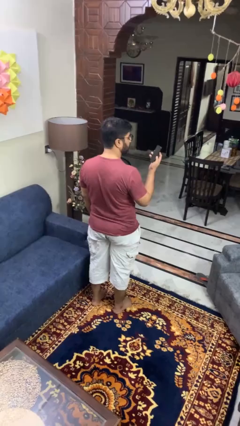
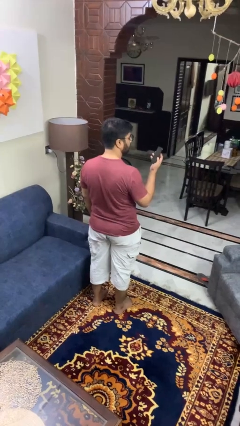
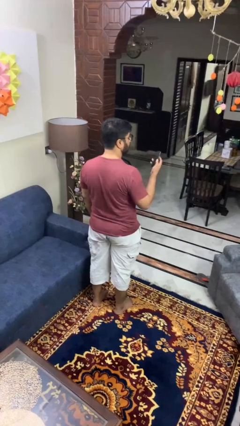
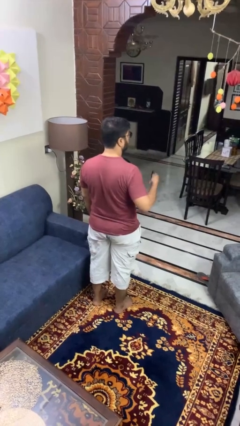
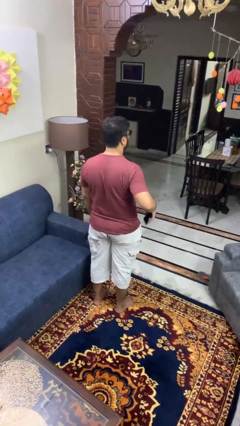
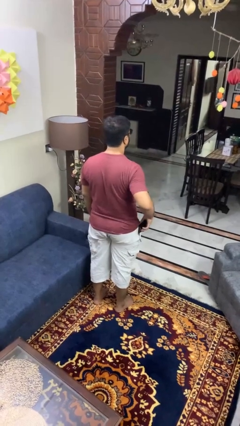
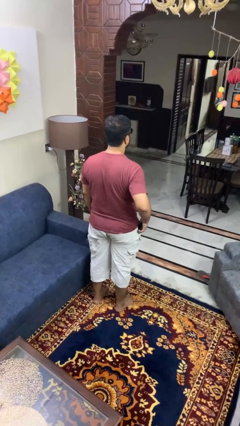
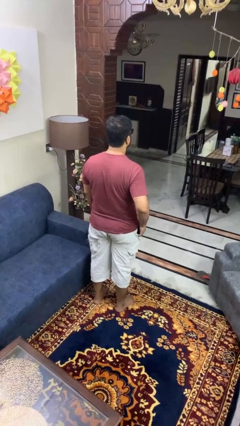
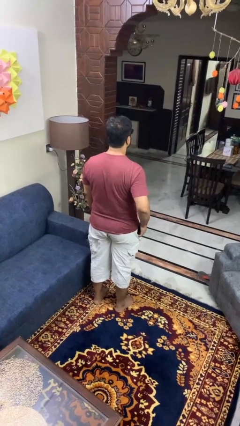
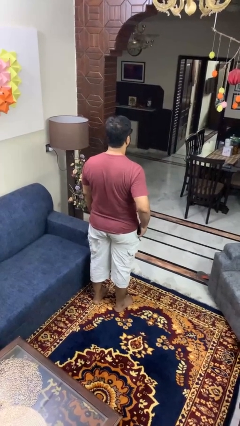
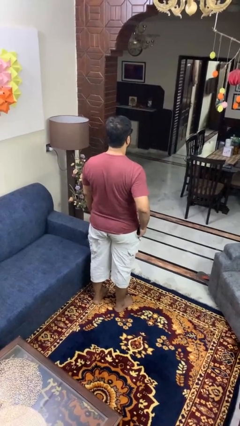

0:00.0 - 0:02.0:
person puts phone into pocket

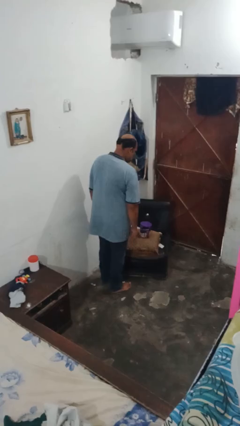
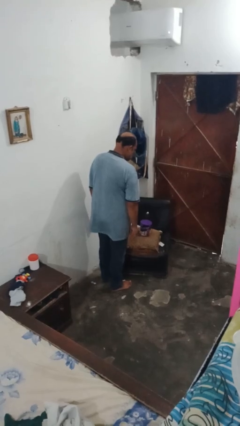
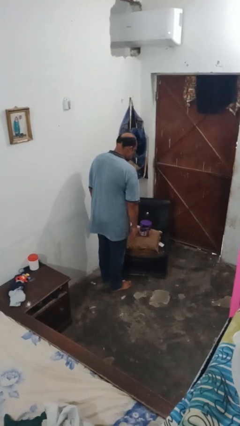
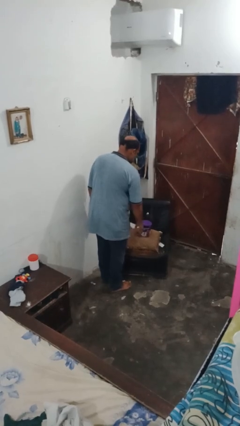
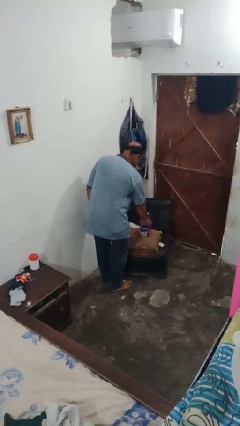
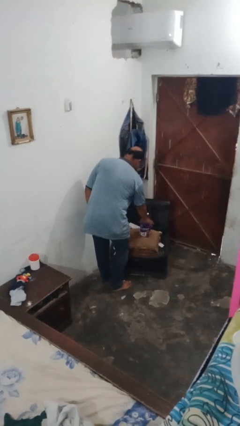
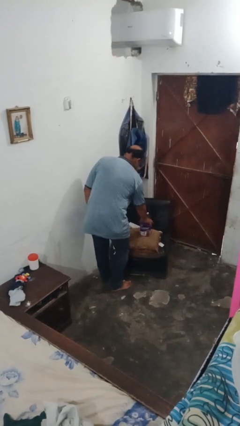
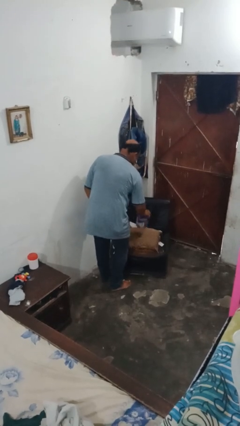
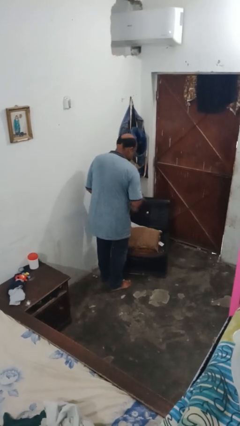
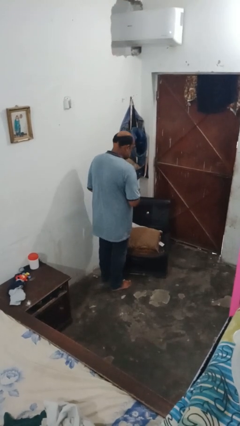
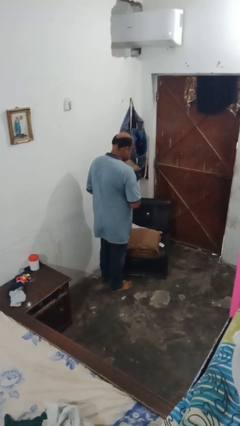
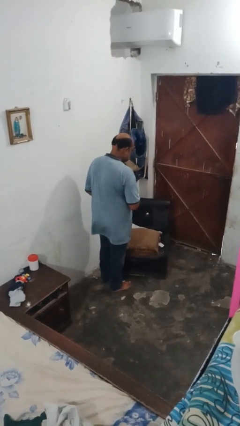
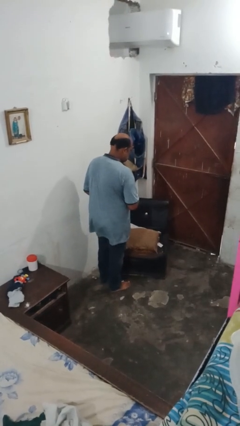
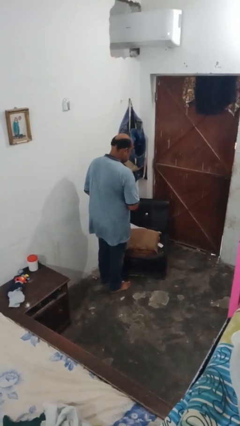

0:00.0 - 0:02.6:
person picks up object from couch

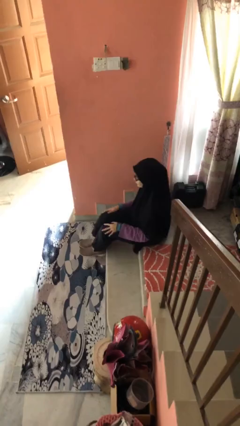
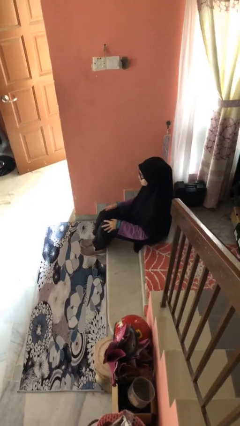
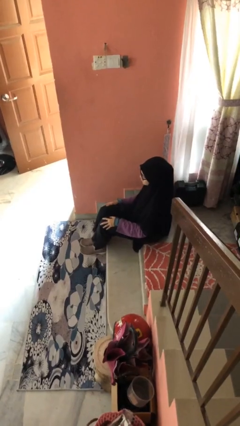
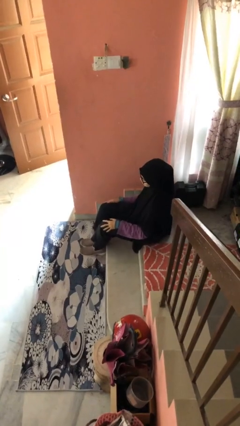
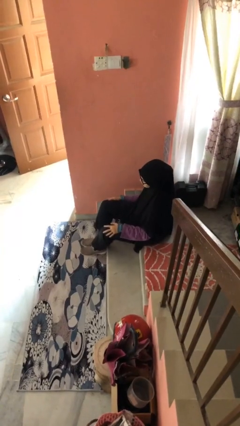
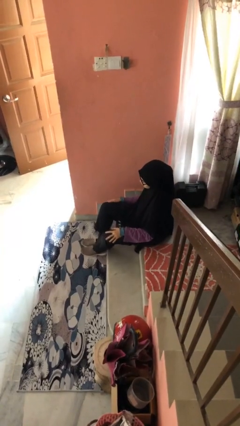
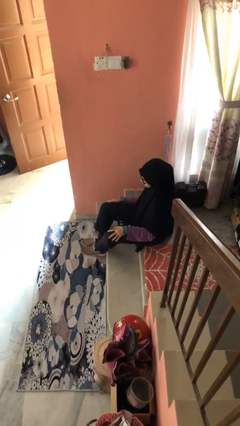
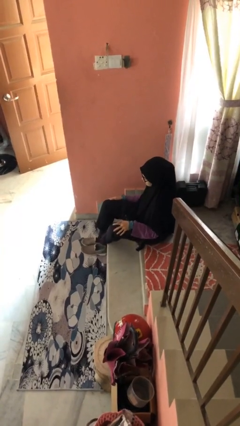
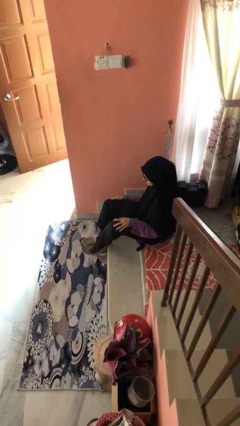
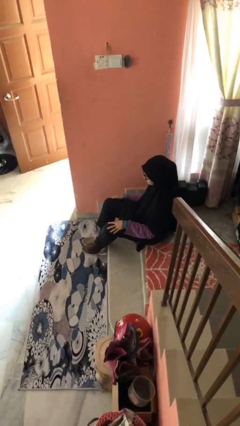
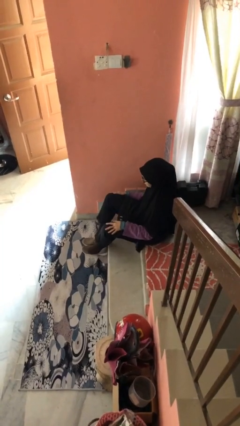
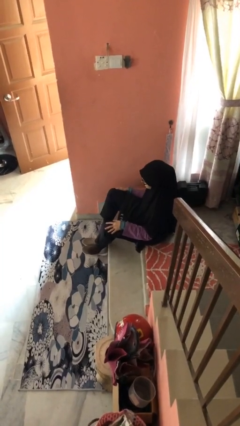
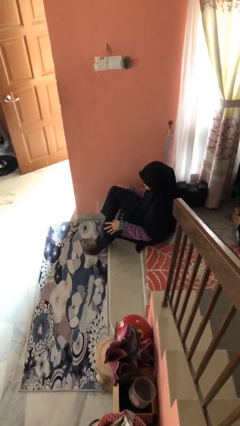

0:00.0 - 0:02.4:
person takes off shoes

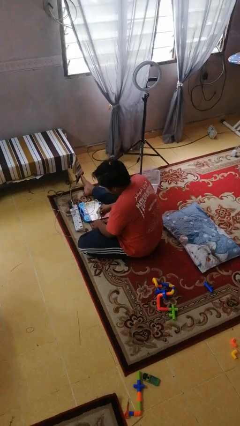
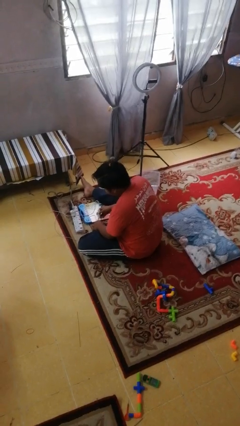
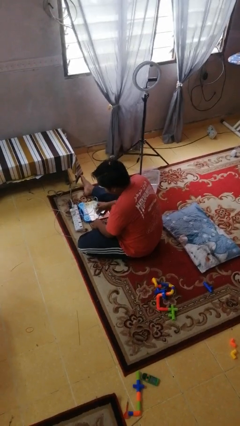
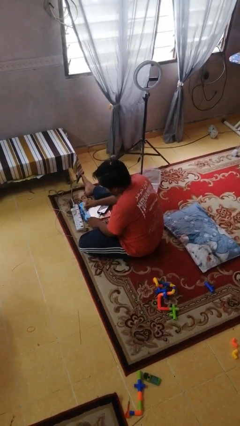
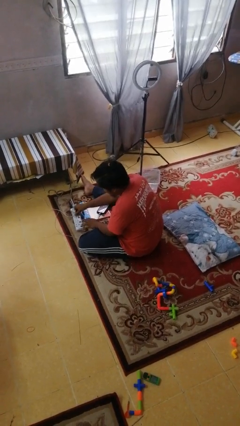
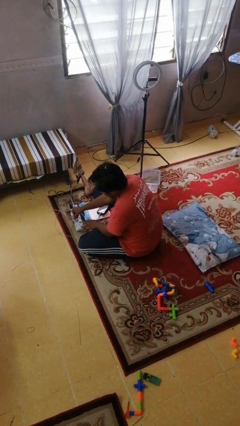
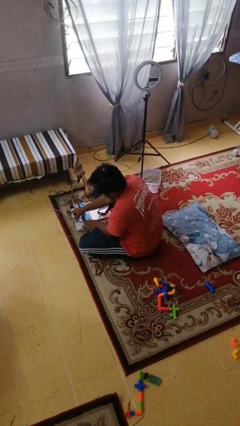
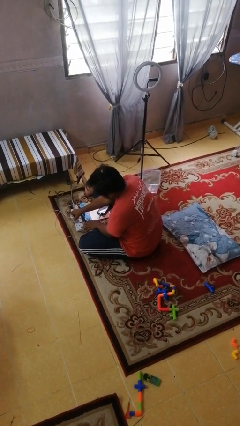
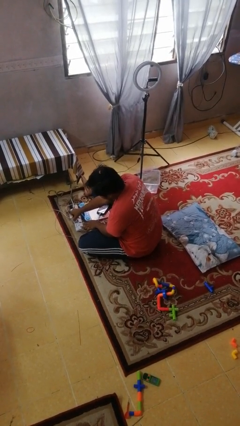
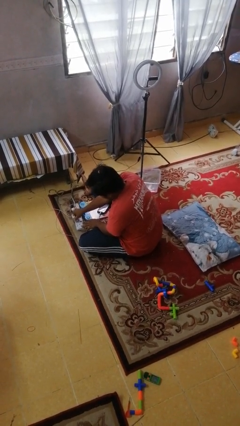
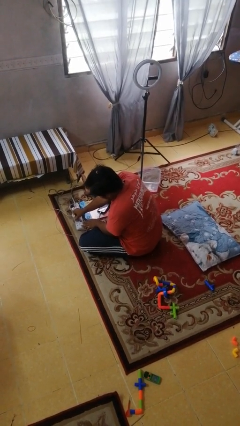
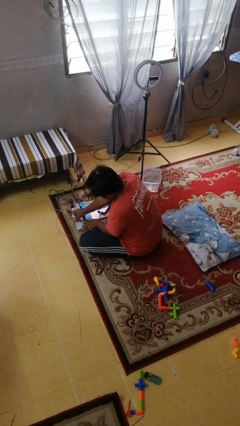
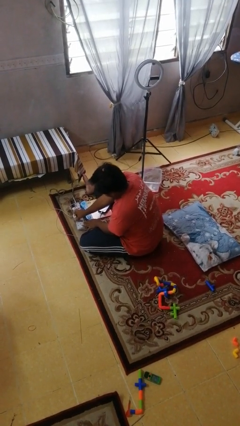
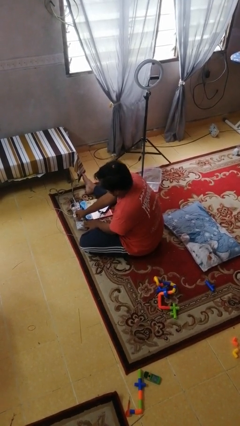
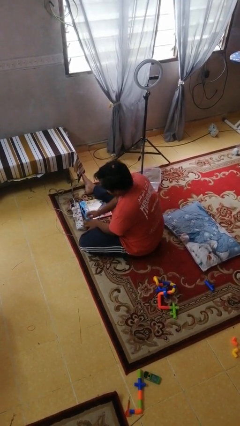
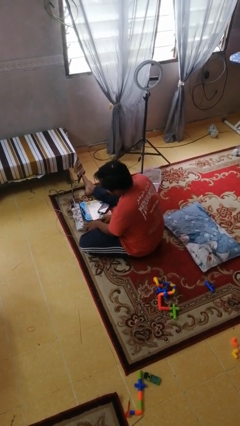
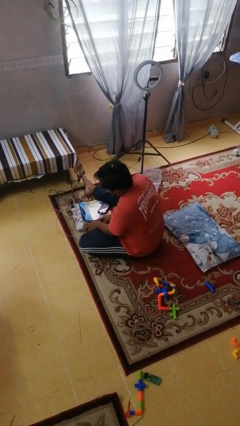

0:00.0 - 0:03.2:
person plugs into electrical socket

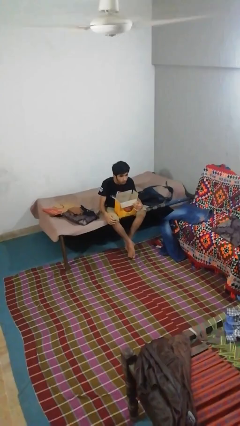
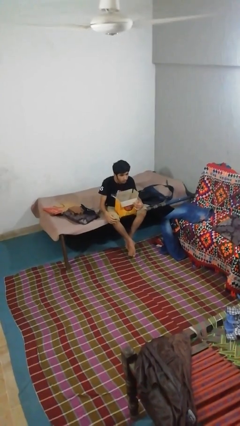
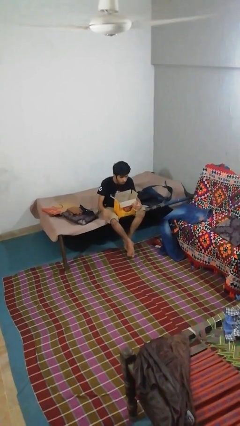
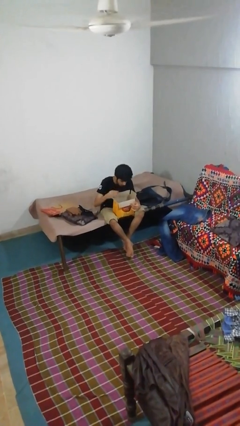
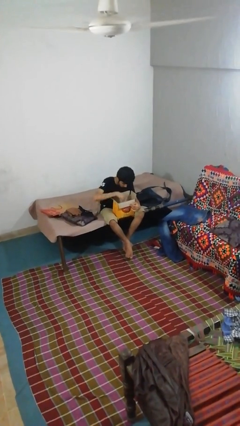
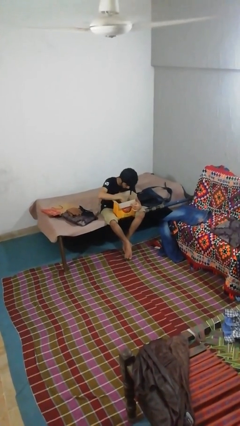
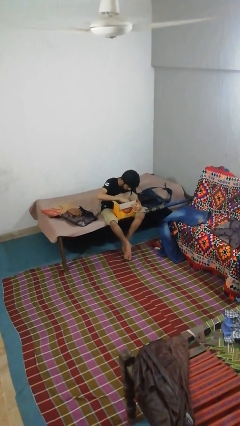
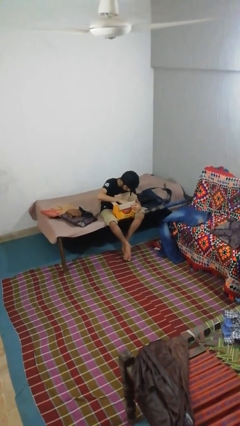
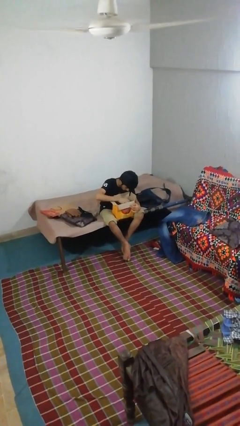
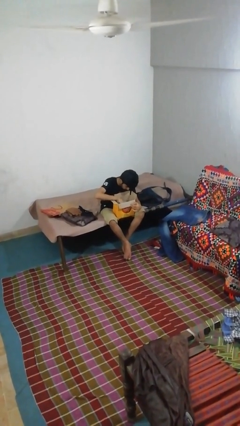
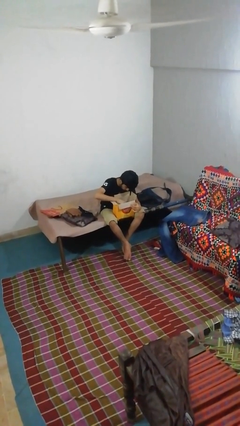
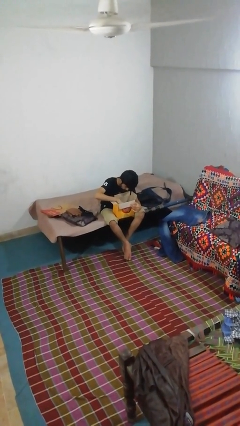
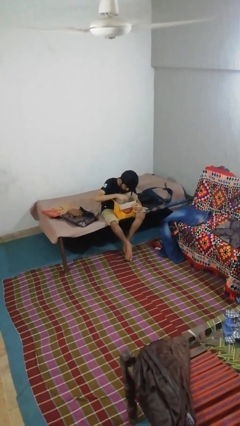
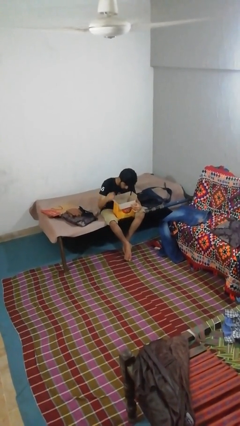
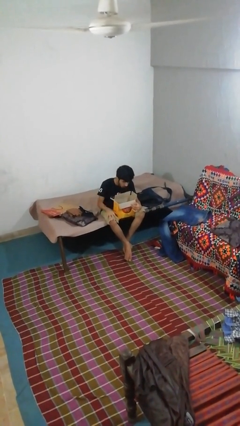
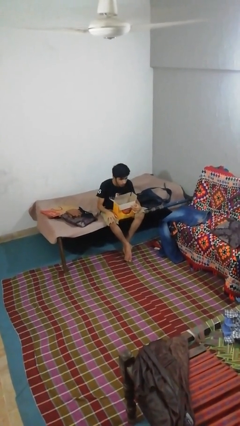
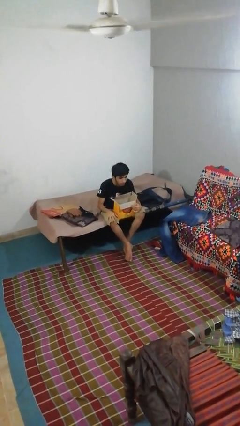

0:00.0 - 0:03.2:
person searches in box

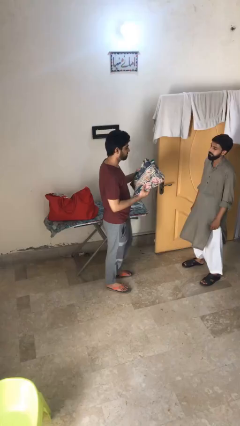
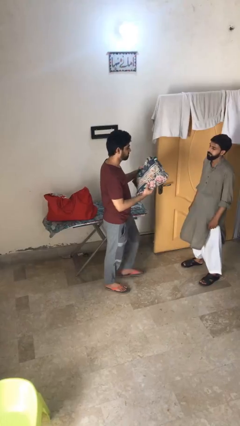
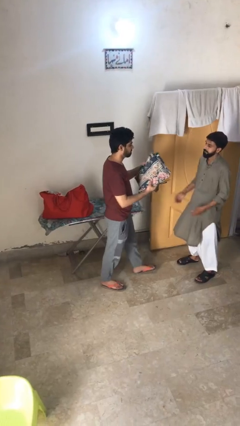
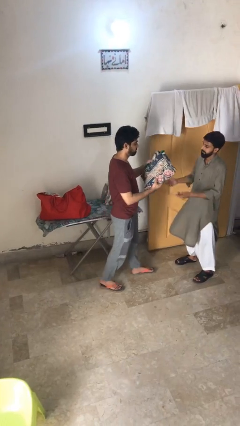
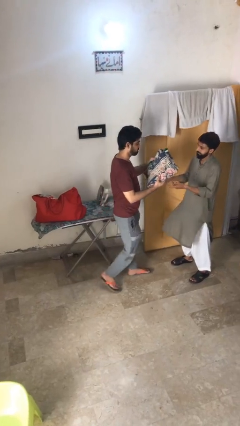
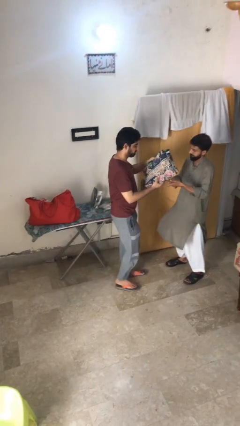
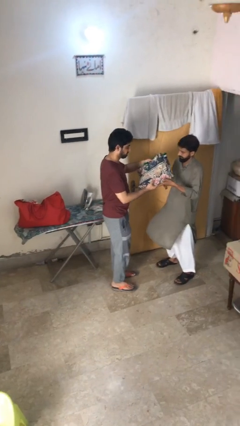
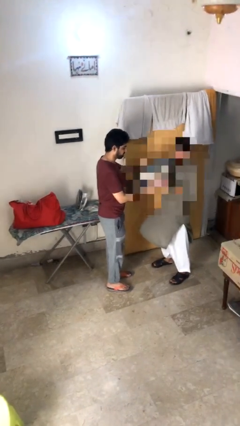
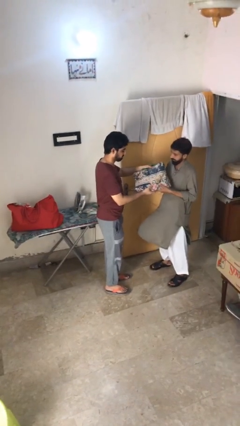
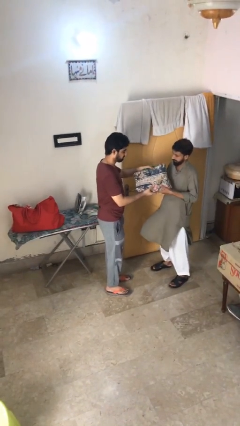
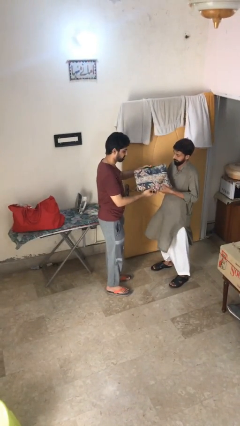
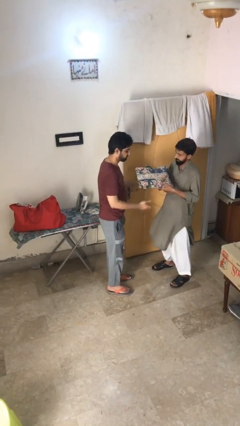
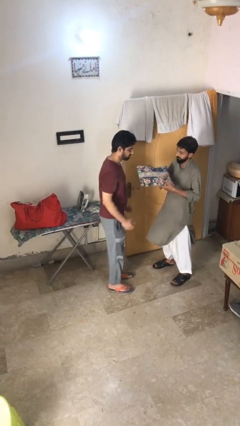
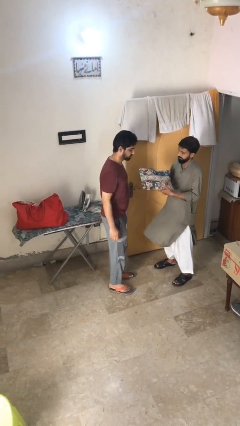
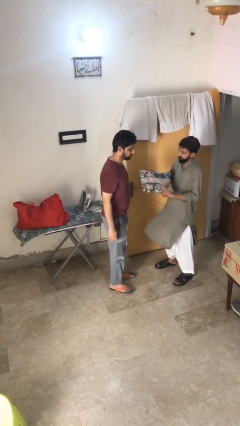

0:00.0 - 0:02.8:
person transfers object to person

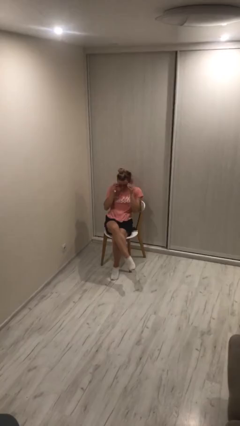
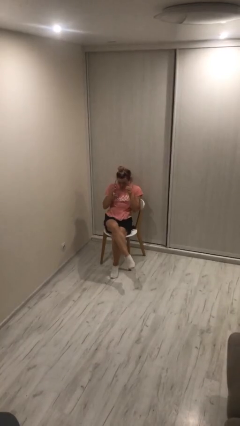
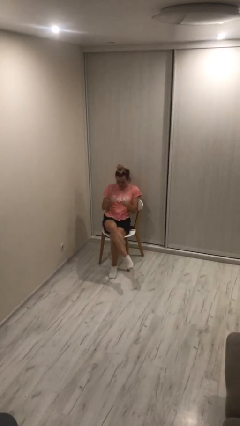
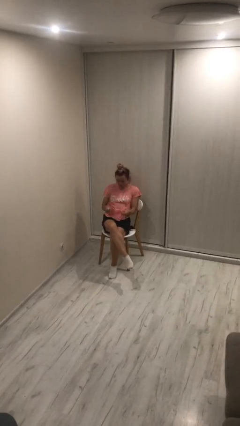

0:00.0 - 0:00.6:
person takes off glasses
